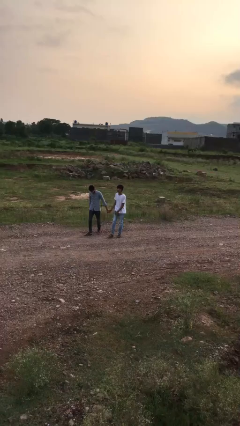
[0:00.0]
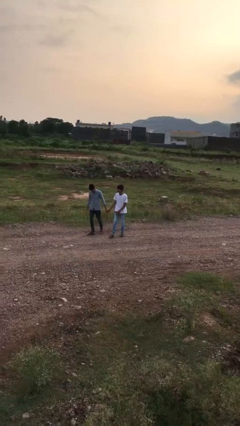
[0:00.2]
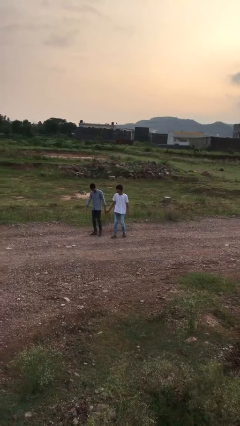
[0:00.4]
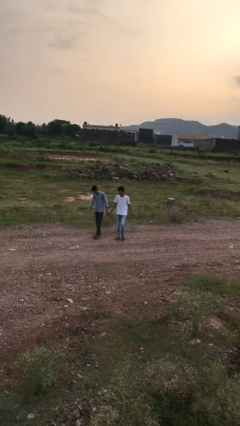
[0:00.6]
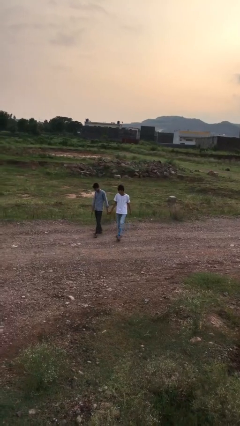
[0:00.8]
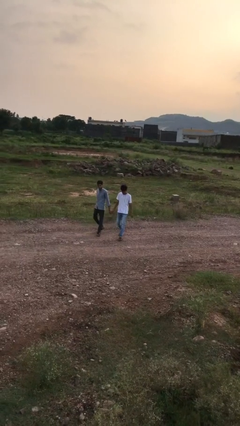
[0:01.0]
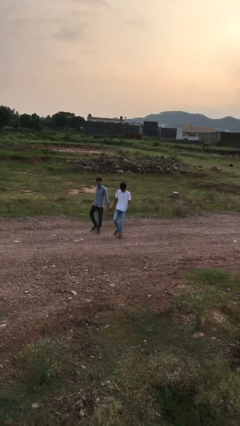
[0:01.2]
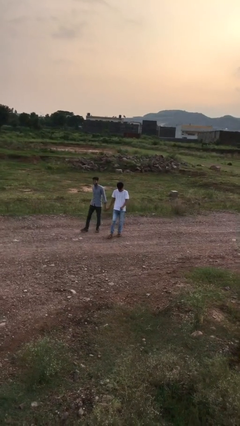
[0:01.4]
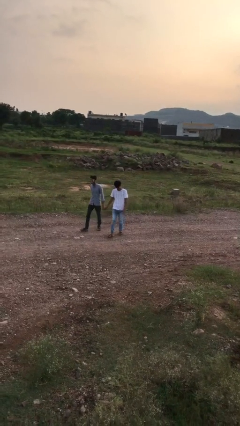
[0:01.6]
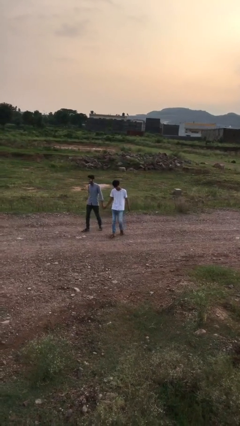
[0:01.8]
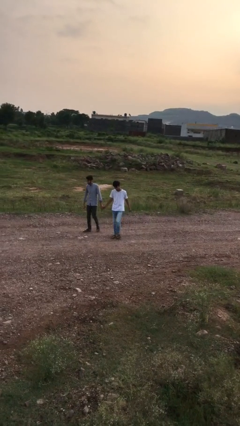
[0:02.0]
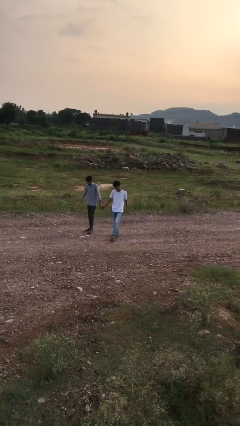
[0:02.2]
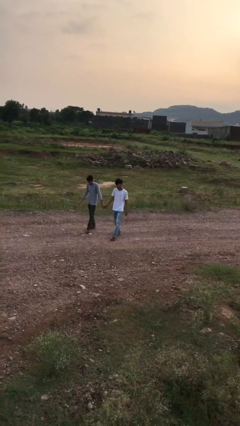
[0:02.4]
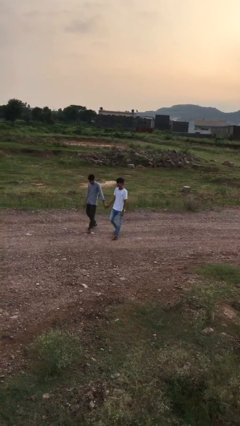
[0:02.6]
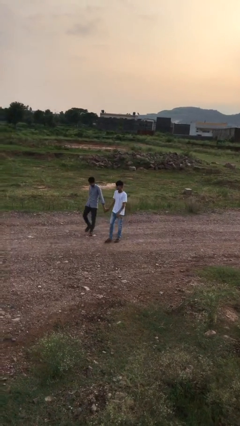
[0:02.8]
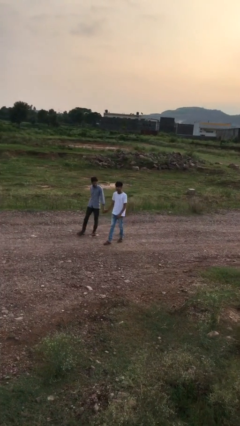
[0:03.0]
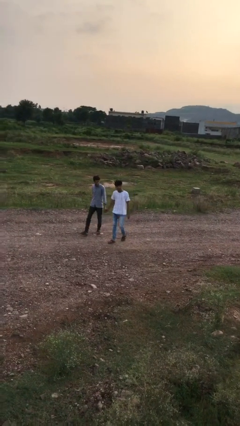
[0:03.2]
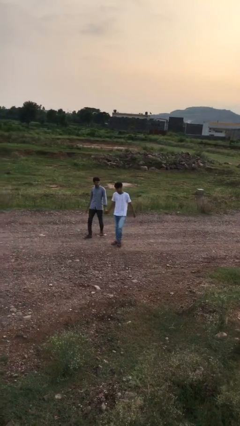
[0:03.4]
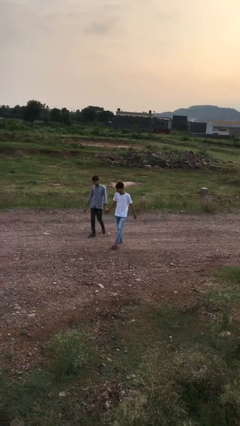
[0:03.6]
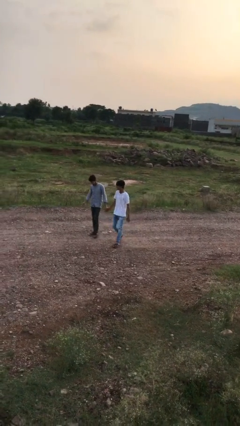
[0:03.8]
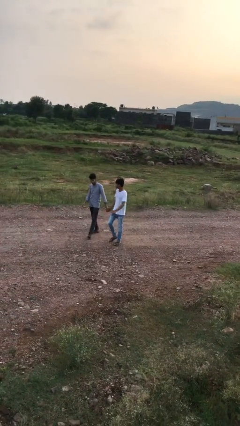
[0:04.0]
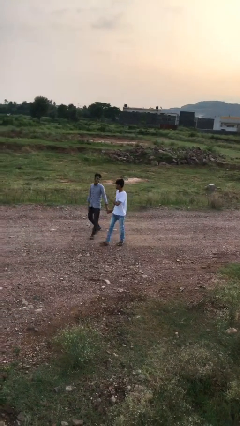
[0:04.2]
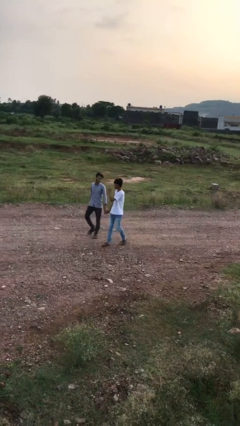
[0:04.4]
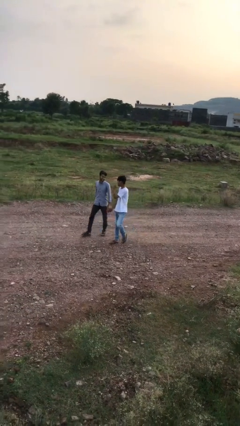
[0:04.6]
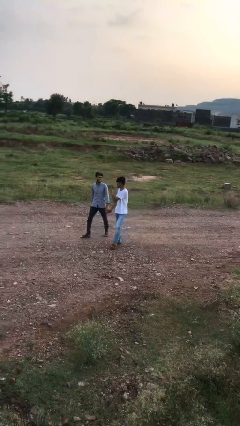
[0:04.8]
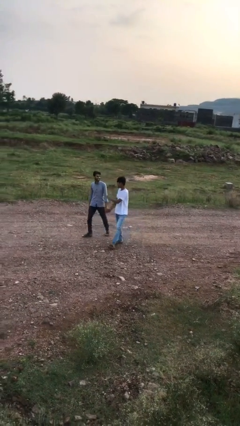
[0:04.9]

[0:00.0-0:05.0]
person holds hand

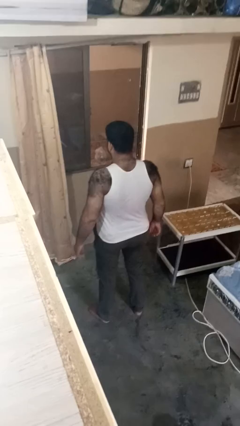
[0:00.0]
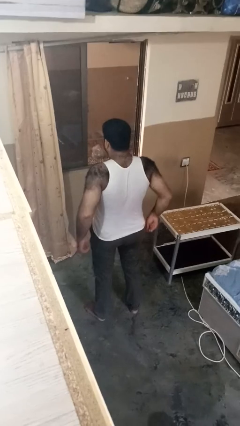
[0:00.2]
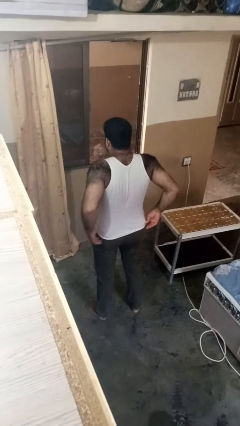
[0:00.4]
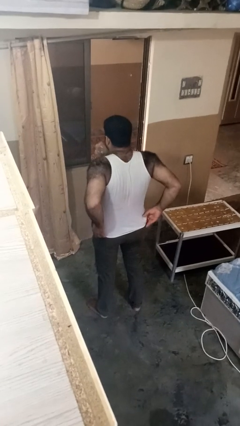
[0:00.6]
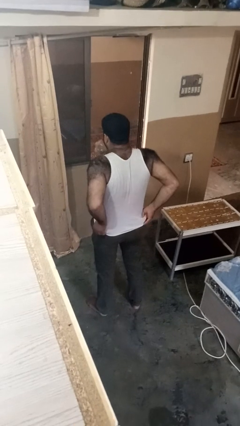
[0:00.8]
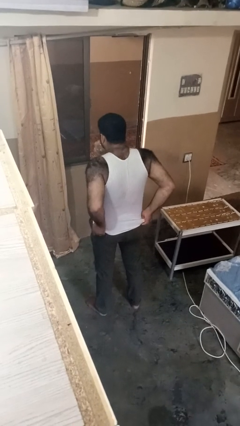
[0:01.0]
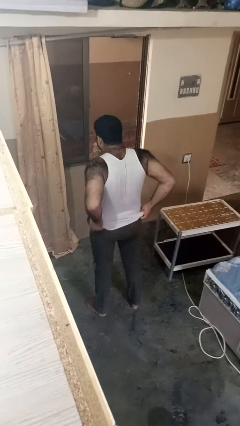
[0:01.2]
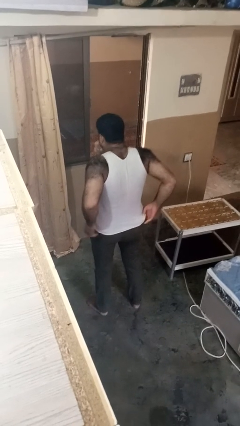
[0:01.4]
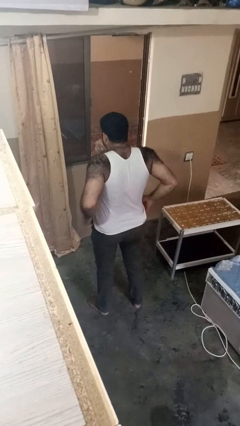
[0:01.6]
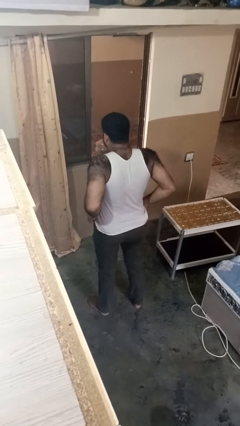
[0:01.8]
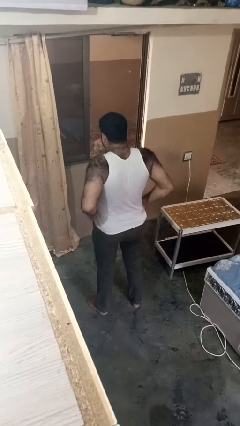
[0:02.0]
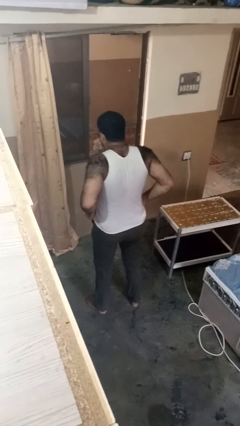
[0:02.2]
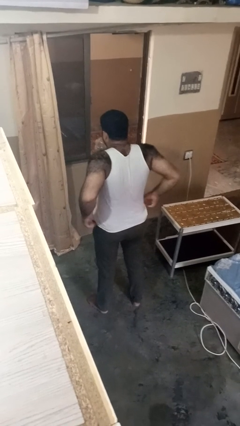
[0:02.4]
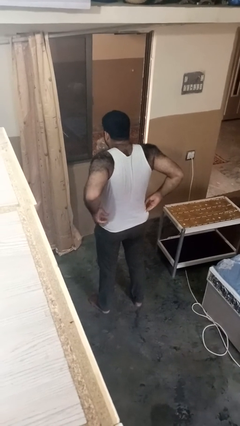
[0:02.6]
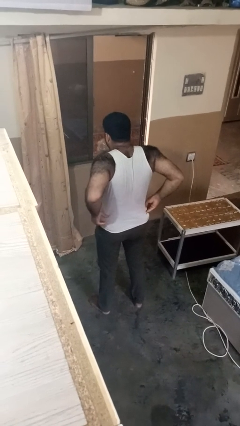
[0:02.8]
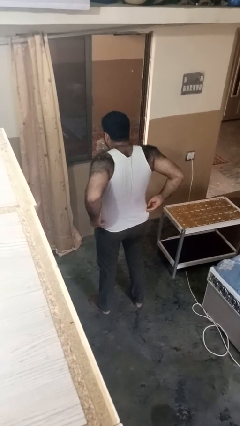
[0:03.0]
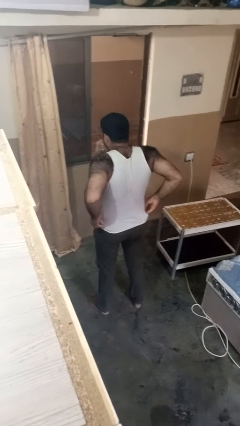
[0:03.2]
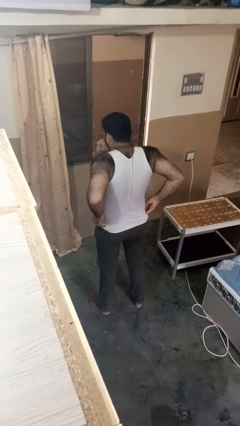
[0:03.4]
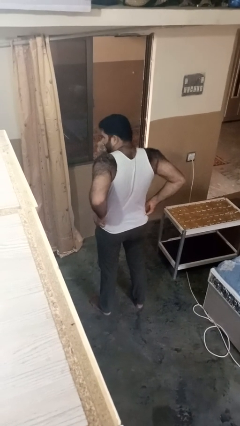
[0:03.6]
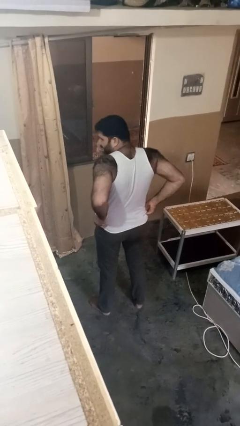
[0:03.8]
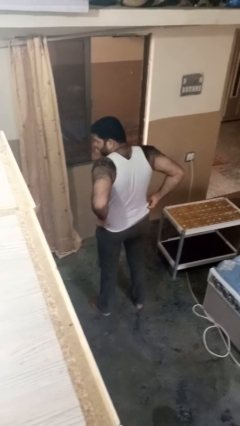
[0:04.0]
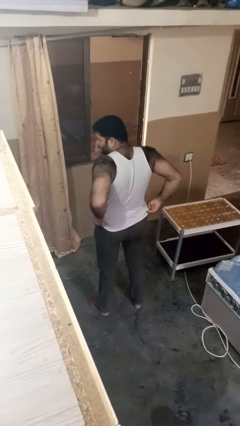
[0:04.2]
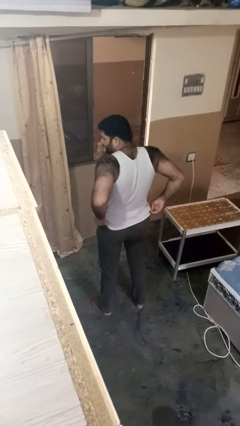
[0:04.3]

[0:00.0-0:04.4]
person hikes up pants

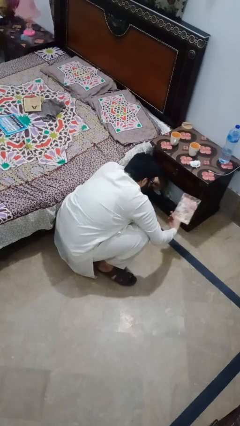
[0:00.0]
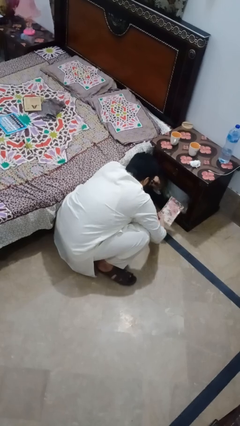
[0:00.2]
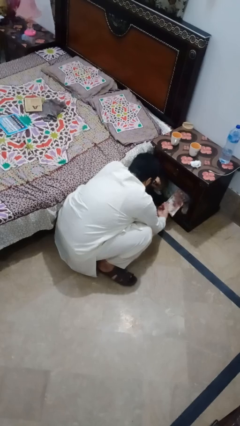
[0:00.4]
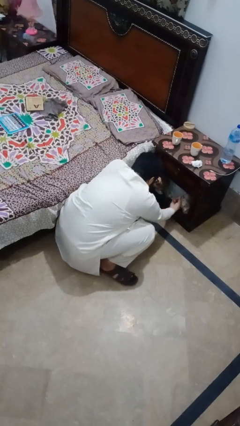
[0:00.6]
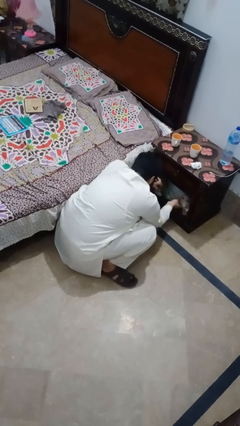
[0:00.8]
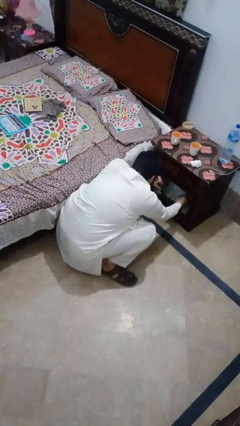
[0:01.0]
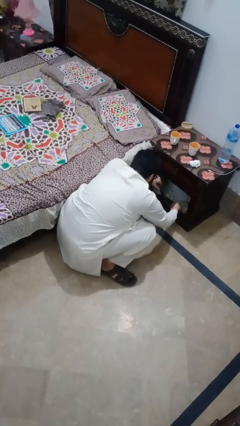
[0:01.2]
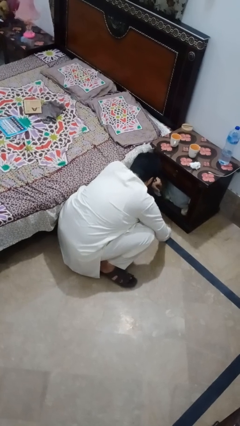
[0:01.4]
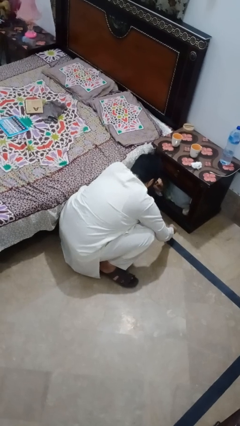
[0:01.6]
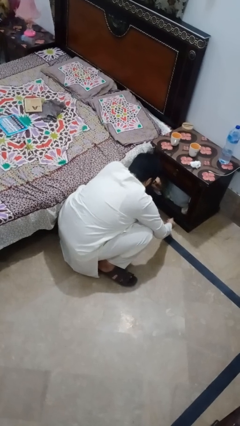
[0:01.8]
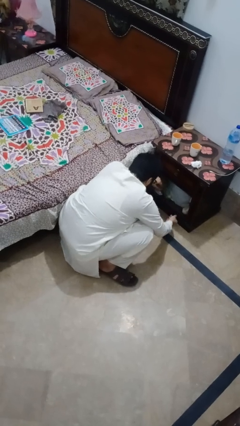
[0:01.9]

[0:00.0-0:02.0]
person puts down object into cabinet

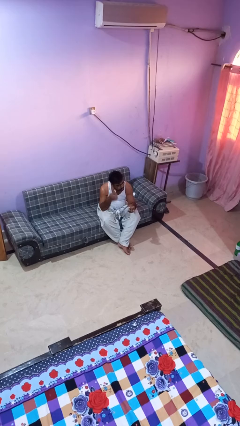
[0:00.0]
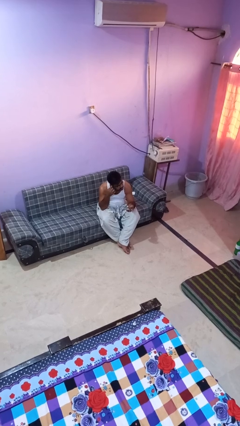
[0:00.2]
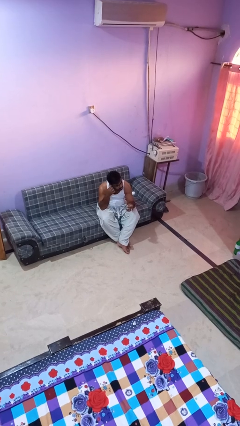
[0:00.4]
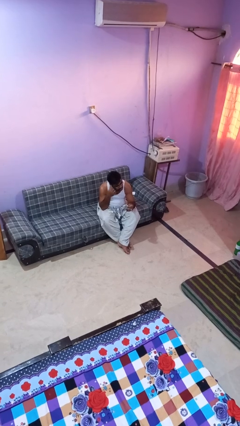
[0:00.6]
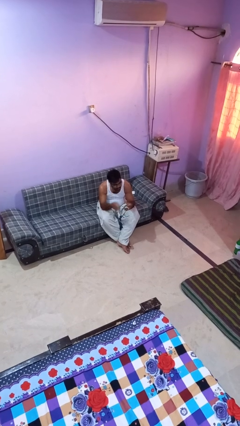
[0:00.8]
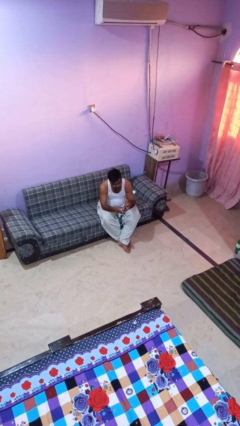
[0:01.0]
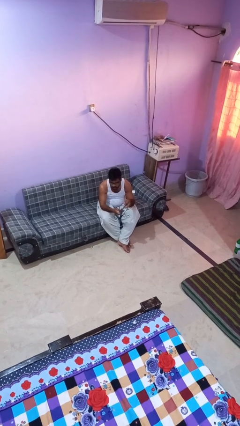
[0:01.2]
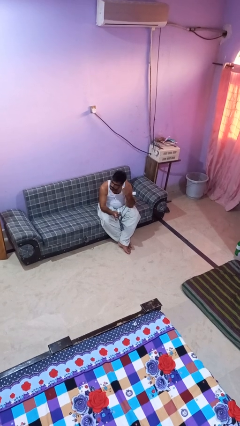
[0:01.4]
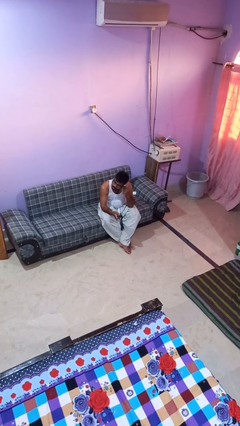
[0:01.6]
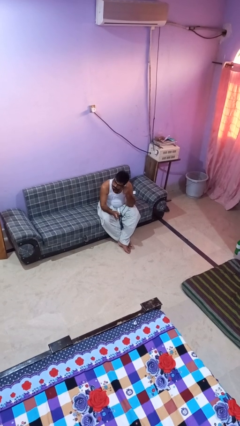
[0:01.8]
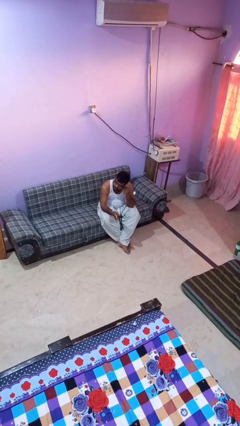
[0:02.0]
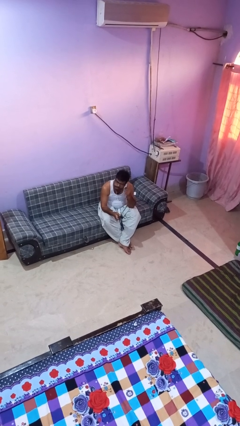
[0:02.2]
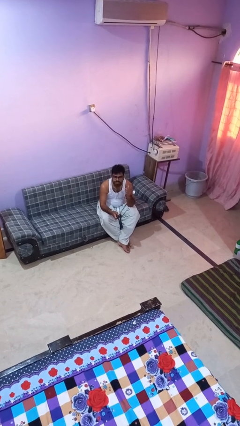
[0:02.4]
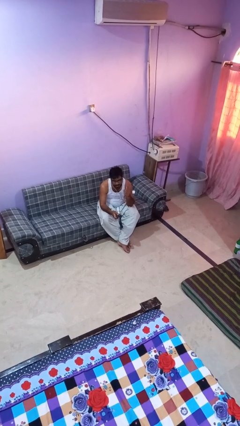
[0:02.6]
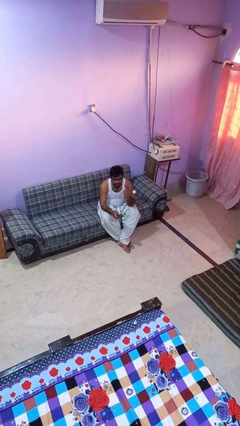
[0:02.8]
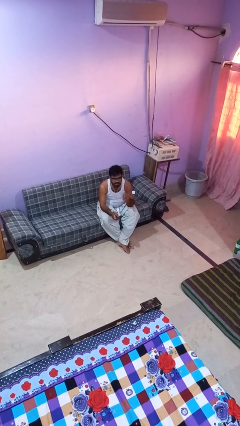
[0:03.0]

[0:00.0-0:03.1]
person puts on headphones

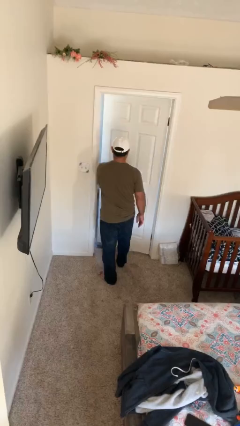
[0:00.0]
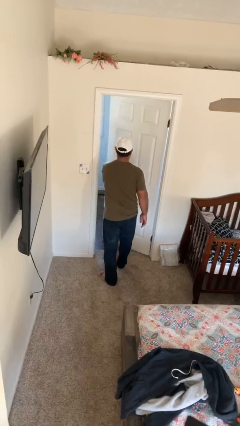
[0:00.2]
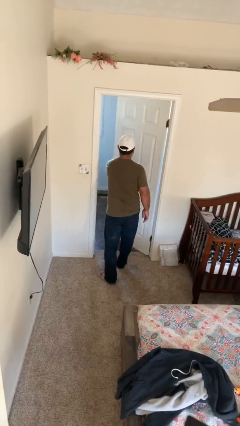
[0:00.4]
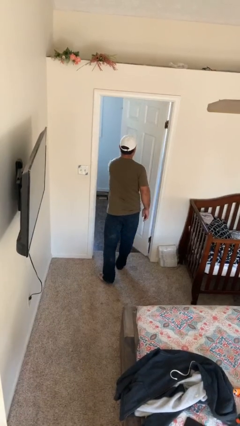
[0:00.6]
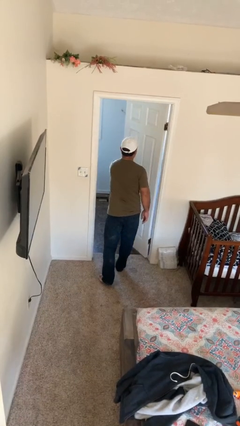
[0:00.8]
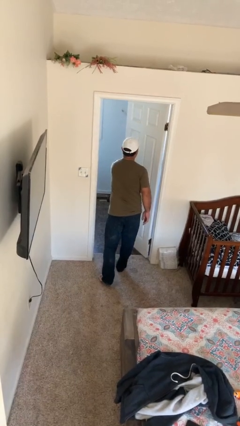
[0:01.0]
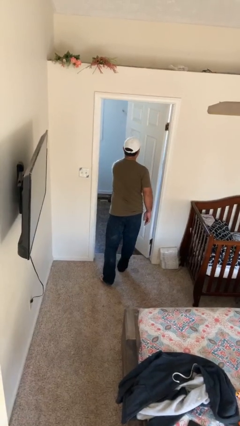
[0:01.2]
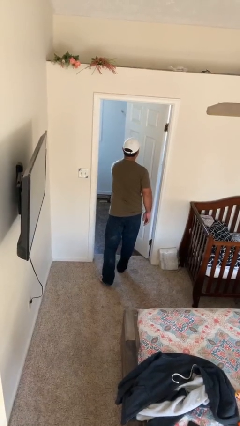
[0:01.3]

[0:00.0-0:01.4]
person opens facility door

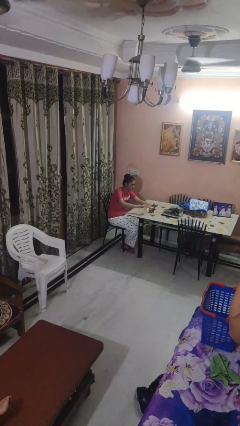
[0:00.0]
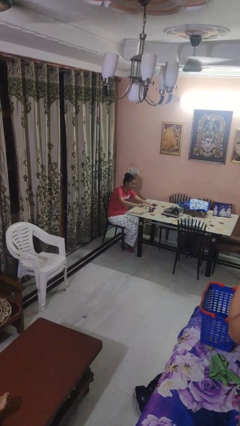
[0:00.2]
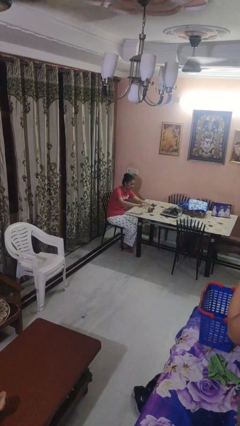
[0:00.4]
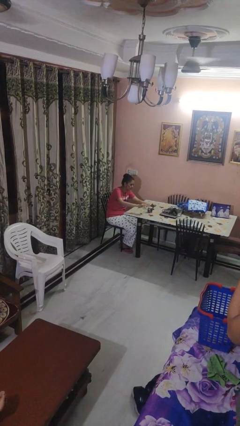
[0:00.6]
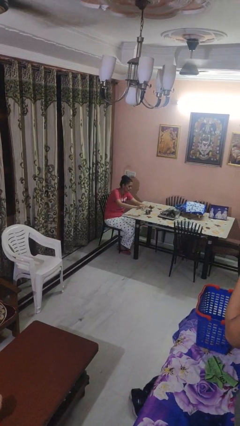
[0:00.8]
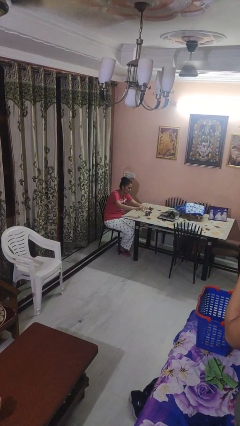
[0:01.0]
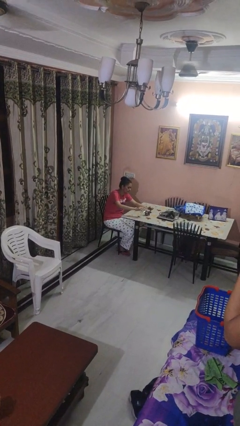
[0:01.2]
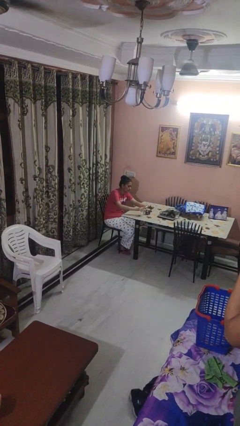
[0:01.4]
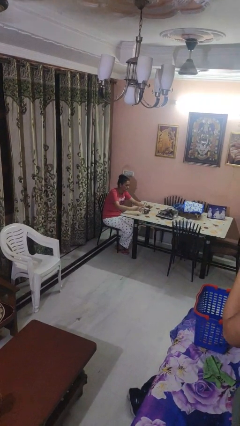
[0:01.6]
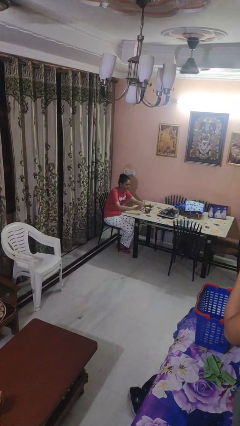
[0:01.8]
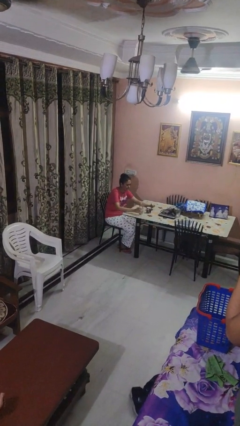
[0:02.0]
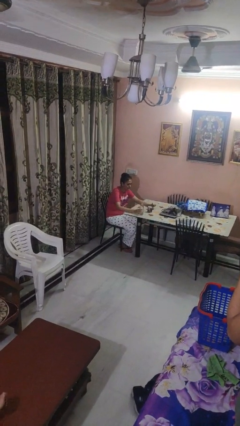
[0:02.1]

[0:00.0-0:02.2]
person pours liquid into cup
